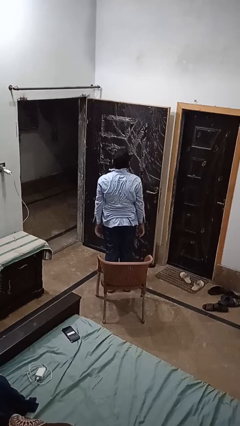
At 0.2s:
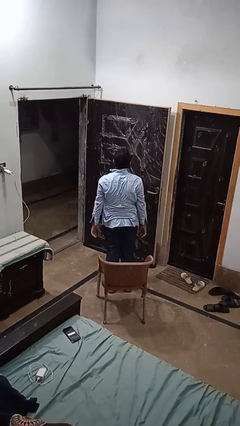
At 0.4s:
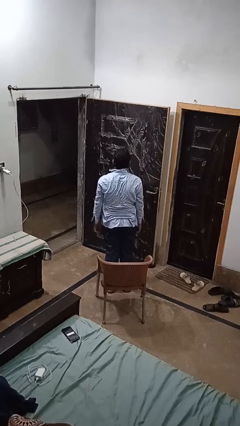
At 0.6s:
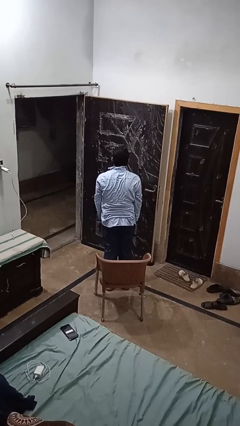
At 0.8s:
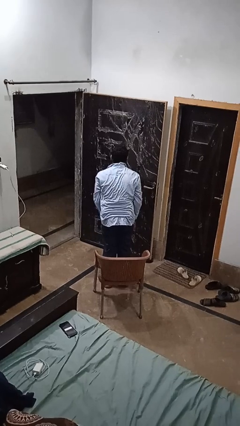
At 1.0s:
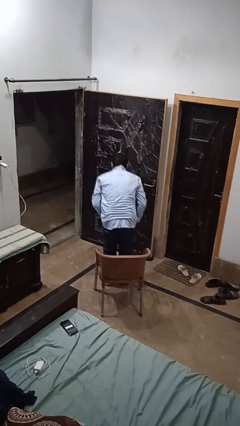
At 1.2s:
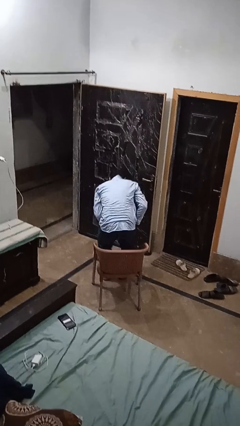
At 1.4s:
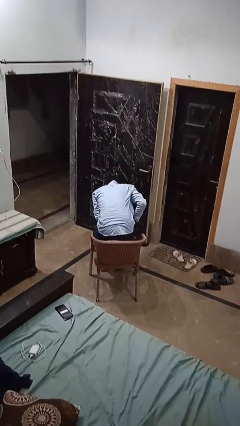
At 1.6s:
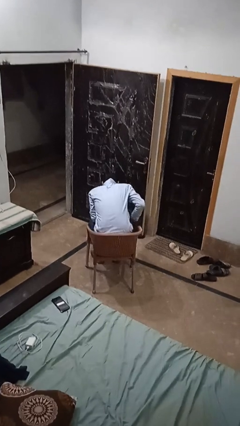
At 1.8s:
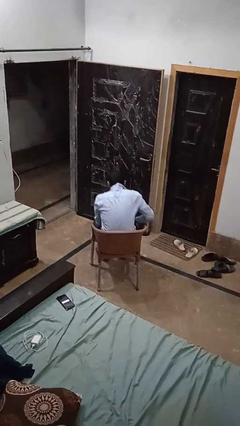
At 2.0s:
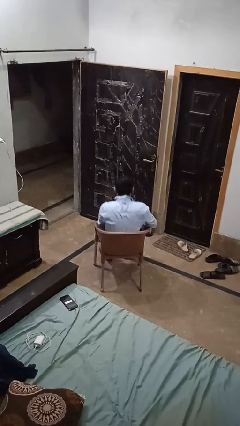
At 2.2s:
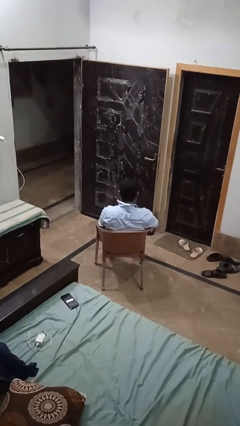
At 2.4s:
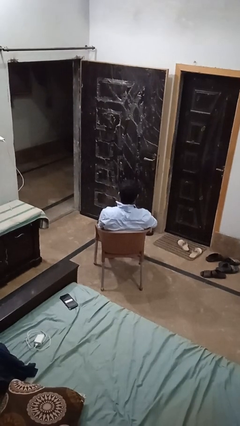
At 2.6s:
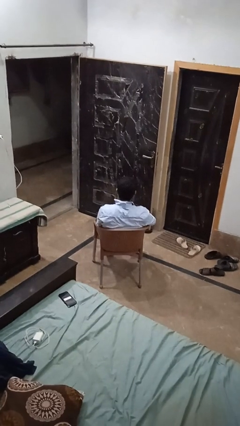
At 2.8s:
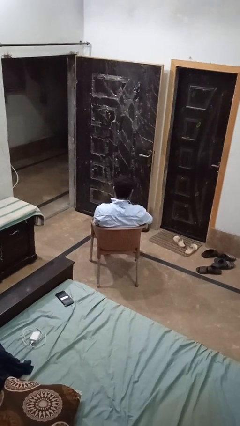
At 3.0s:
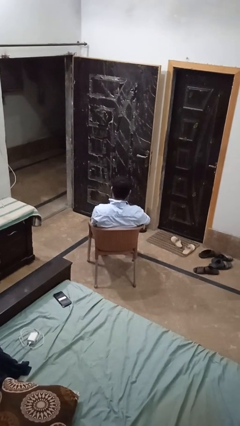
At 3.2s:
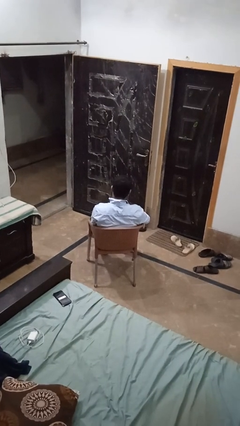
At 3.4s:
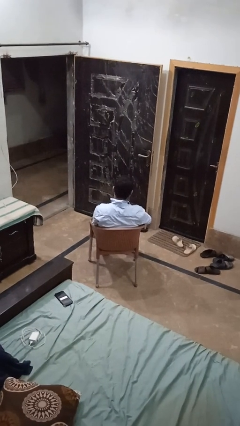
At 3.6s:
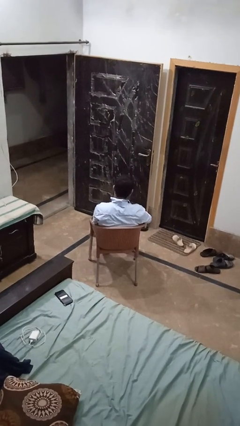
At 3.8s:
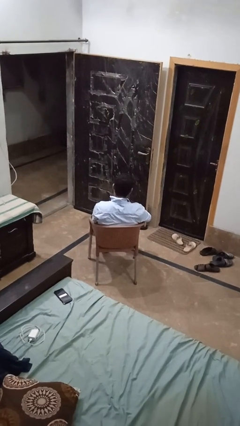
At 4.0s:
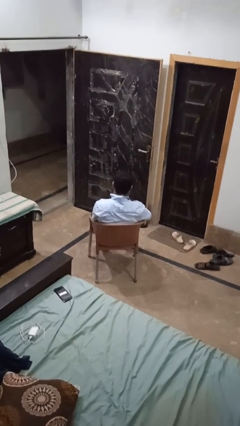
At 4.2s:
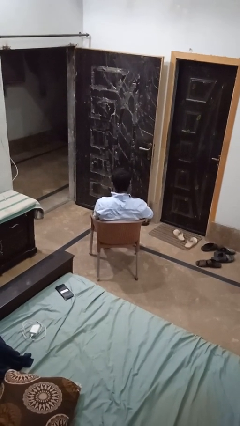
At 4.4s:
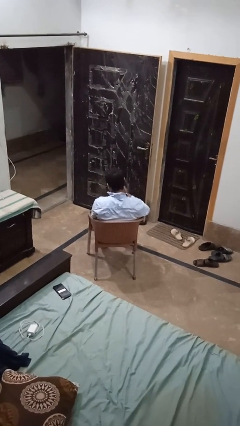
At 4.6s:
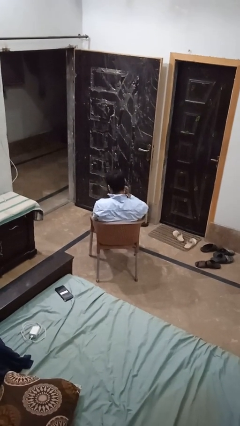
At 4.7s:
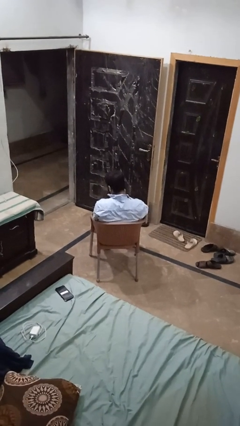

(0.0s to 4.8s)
person sits down

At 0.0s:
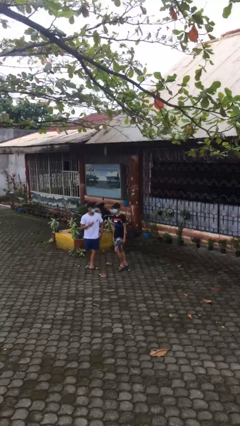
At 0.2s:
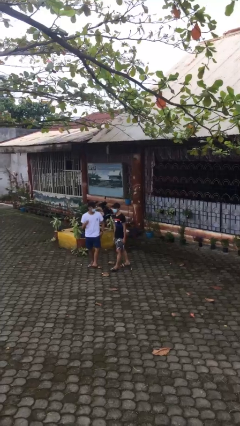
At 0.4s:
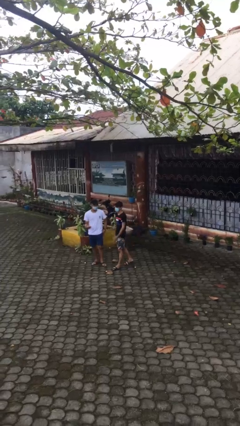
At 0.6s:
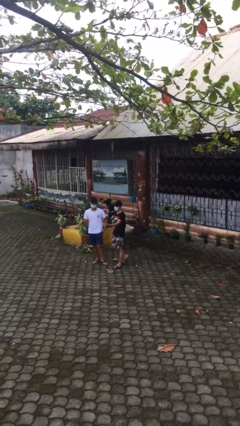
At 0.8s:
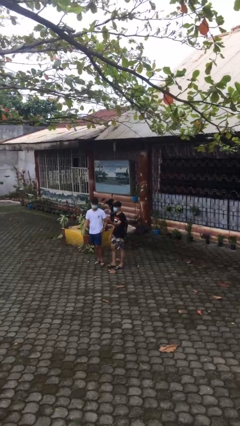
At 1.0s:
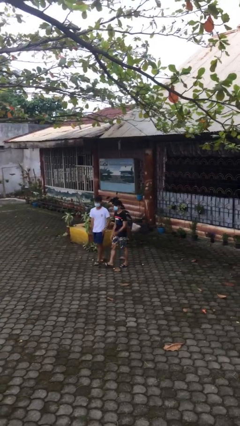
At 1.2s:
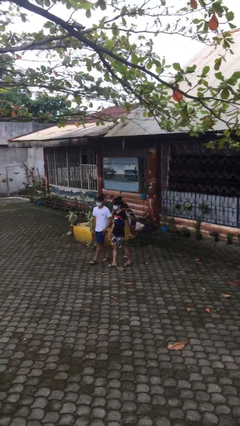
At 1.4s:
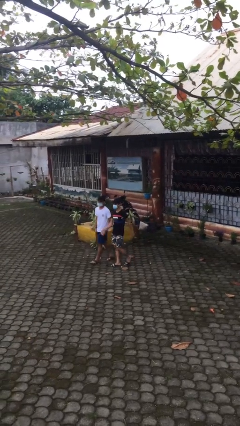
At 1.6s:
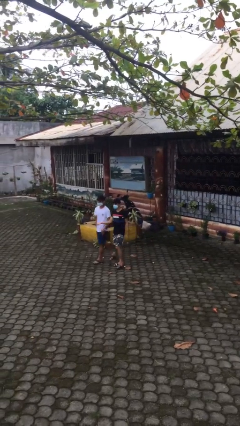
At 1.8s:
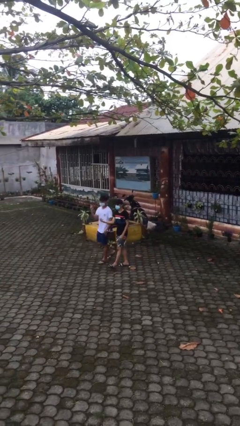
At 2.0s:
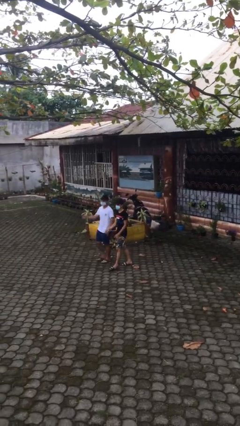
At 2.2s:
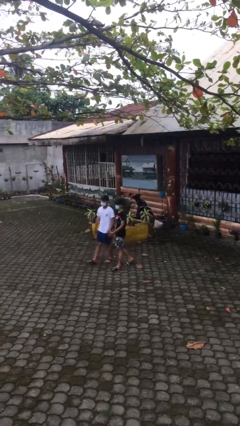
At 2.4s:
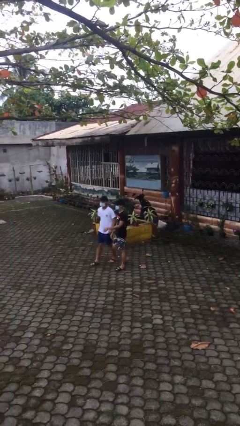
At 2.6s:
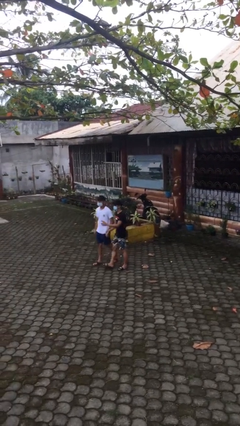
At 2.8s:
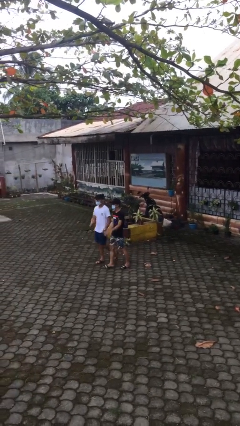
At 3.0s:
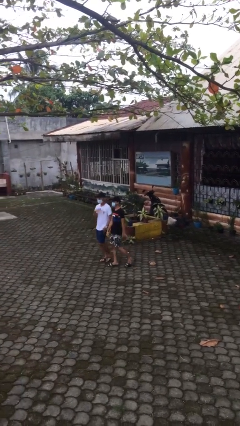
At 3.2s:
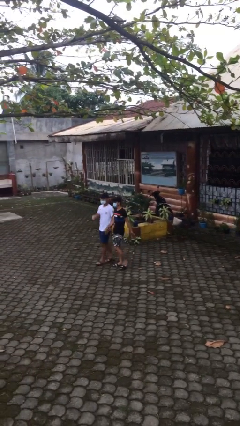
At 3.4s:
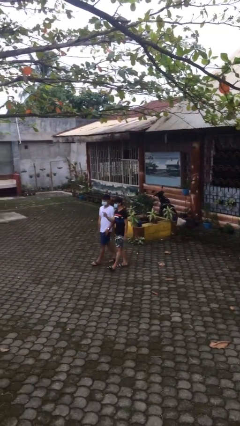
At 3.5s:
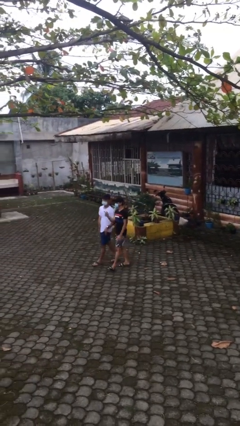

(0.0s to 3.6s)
person talks to person

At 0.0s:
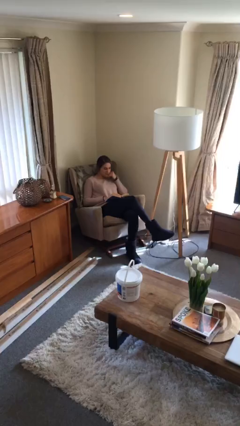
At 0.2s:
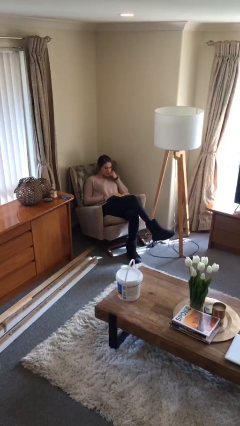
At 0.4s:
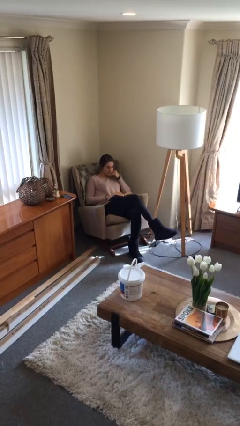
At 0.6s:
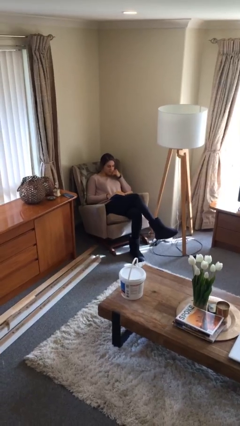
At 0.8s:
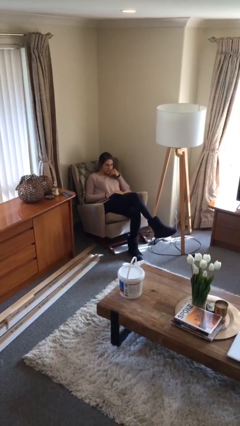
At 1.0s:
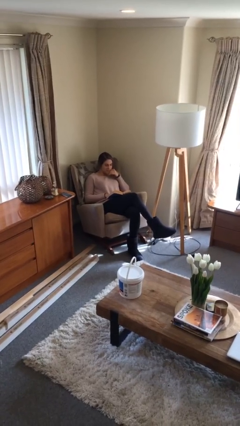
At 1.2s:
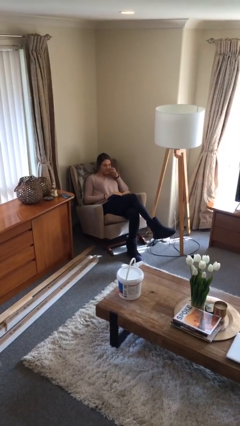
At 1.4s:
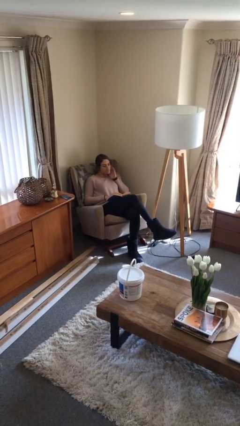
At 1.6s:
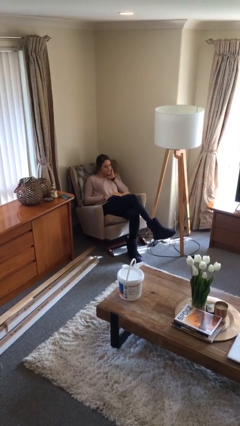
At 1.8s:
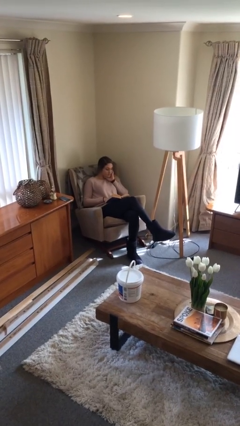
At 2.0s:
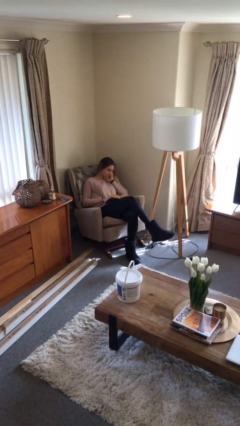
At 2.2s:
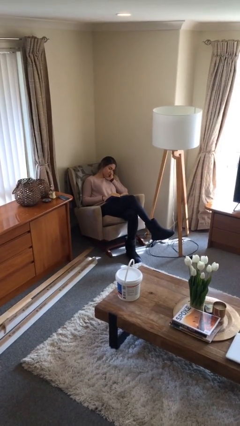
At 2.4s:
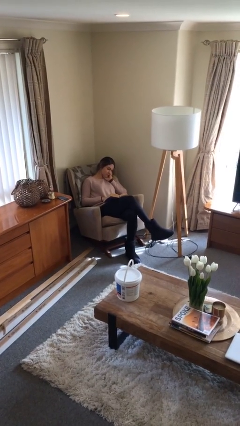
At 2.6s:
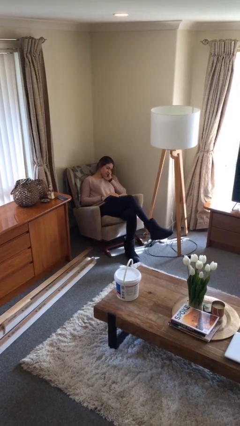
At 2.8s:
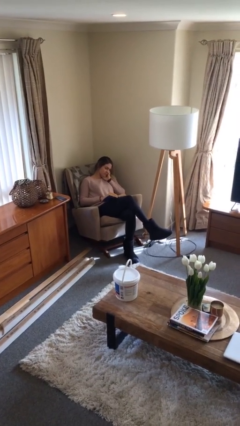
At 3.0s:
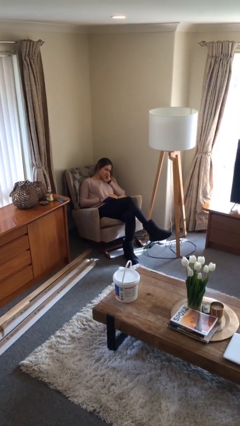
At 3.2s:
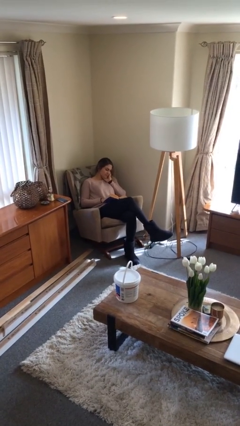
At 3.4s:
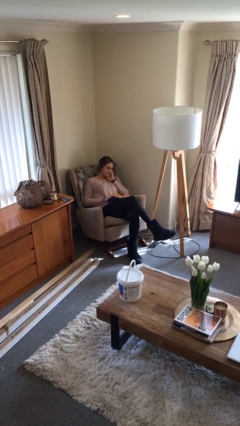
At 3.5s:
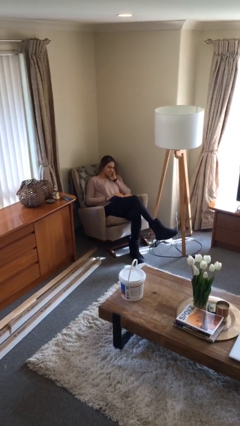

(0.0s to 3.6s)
person reads document

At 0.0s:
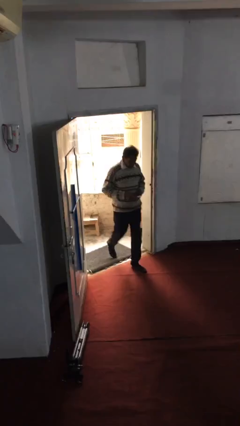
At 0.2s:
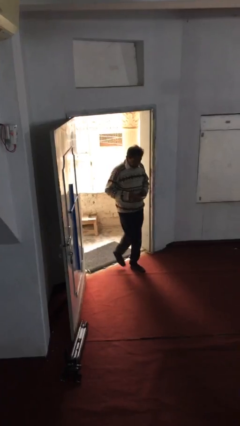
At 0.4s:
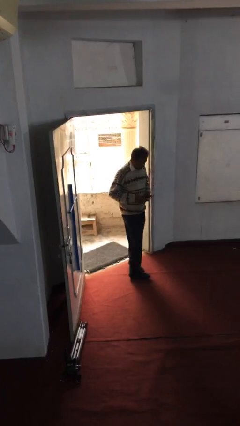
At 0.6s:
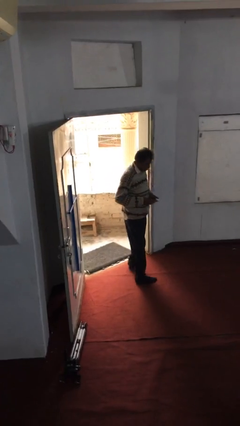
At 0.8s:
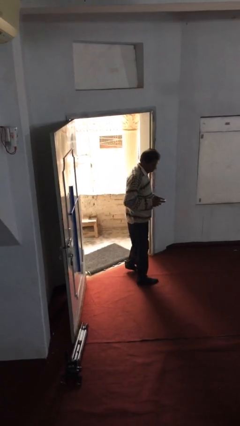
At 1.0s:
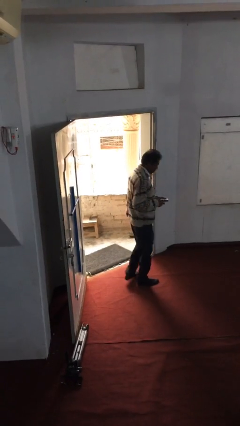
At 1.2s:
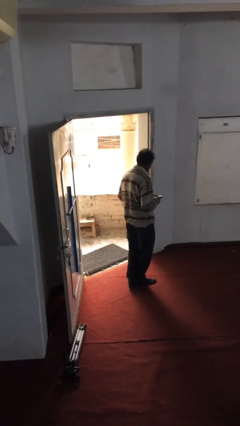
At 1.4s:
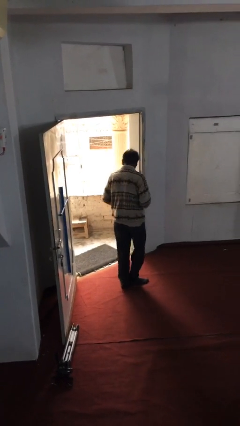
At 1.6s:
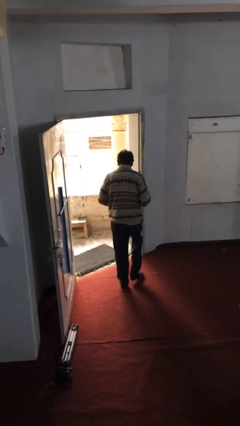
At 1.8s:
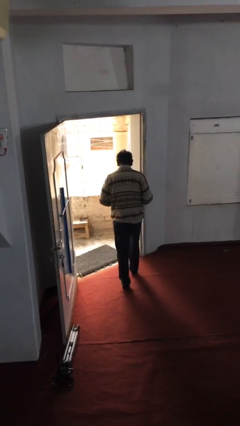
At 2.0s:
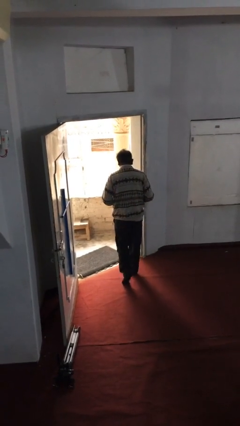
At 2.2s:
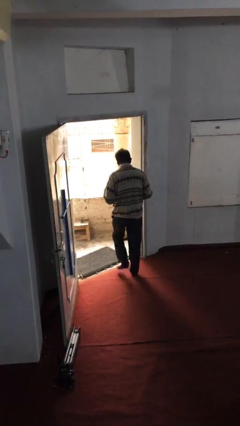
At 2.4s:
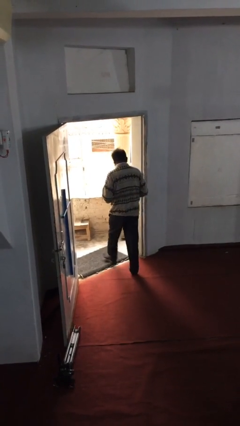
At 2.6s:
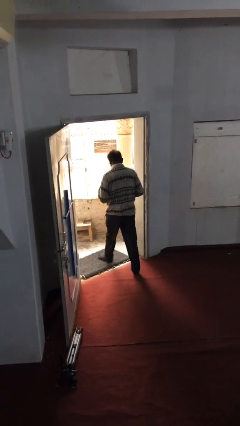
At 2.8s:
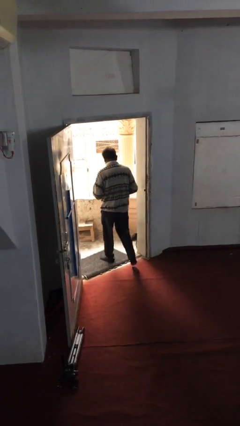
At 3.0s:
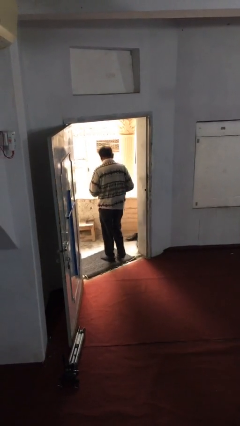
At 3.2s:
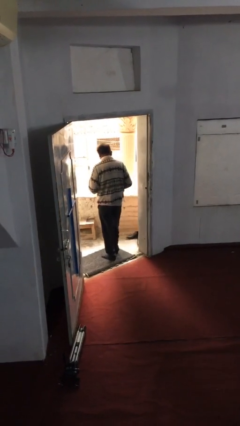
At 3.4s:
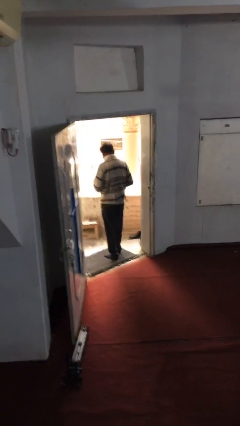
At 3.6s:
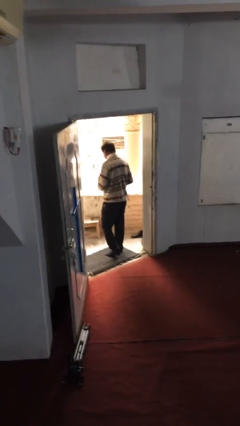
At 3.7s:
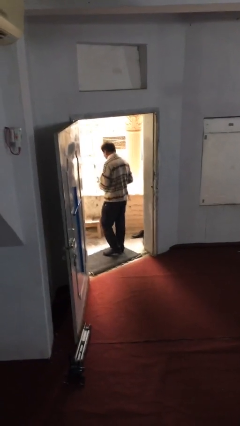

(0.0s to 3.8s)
person exits scene through structure

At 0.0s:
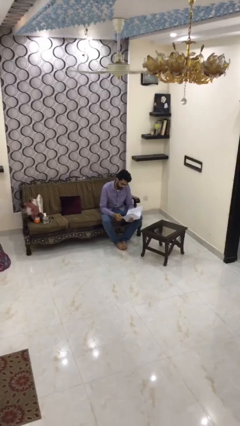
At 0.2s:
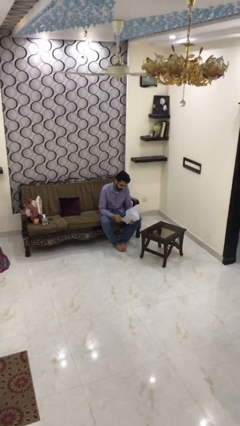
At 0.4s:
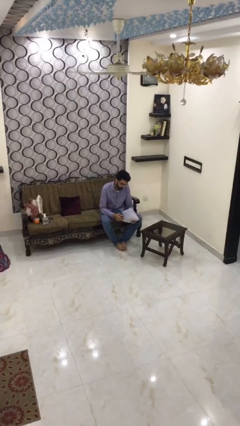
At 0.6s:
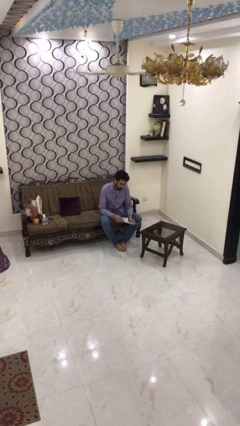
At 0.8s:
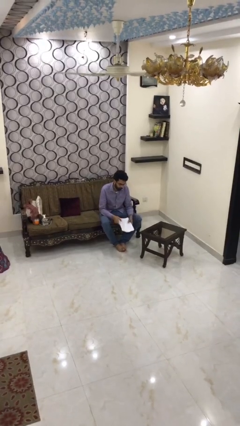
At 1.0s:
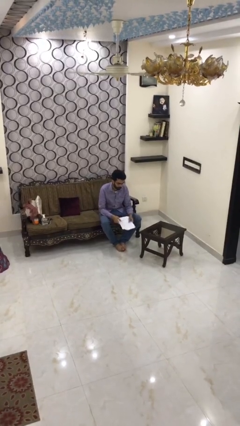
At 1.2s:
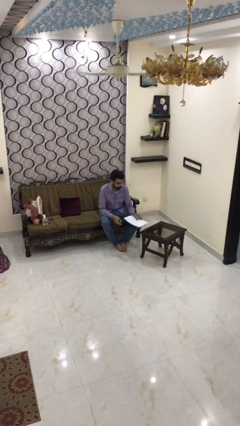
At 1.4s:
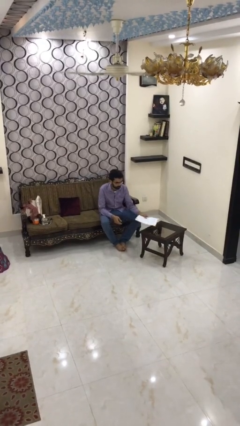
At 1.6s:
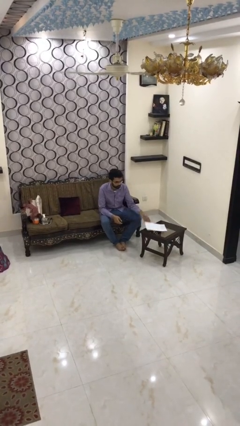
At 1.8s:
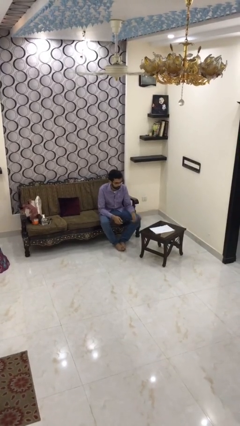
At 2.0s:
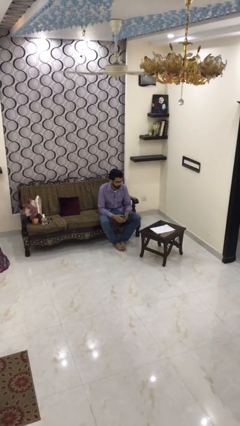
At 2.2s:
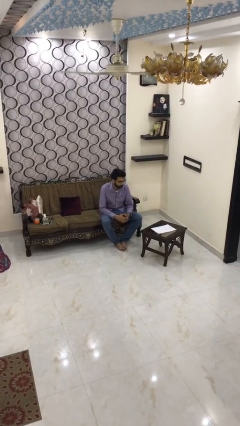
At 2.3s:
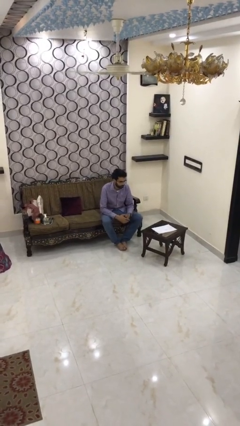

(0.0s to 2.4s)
person puts down object on table
